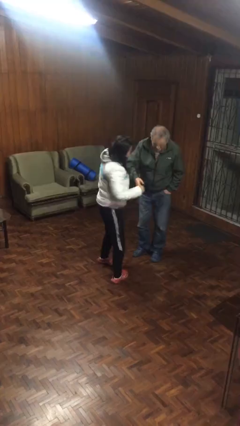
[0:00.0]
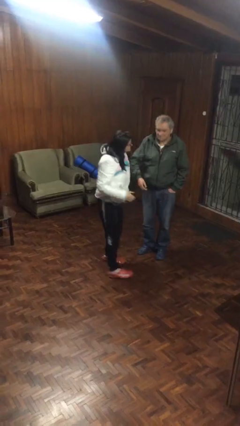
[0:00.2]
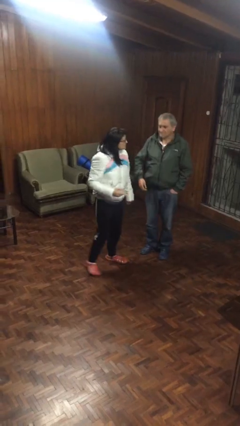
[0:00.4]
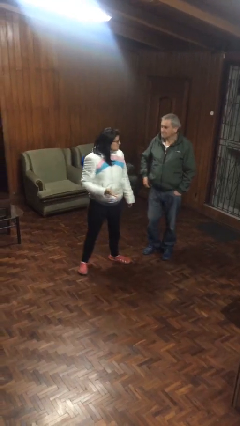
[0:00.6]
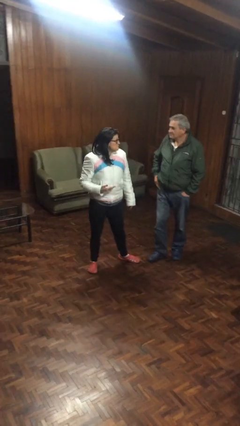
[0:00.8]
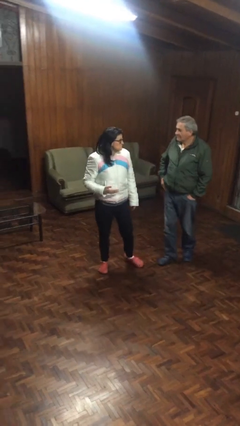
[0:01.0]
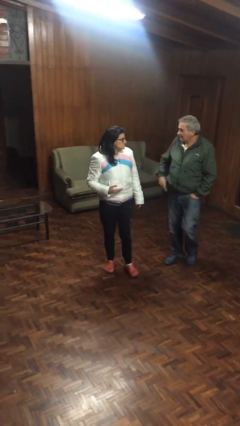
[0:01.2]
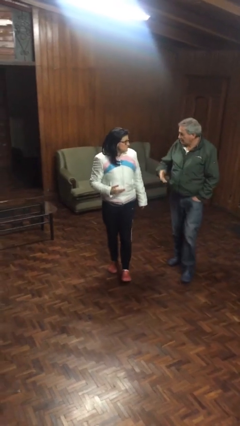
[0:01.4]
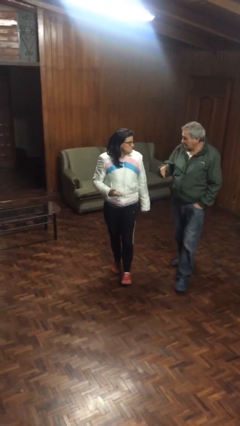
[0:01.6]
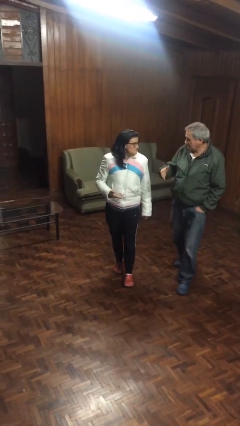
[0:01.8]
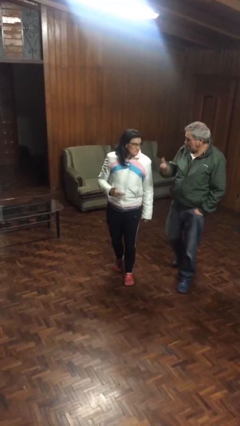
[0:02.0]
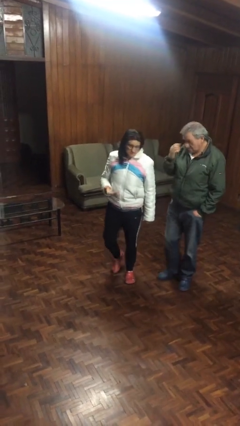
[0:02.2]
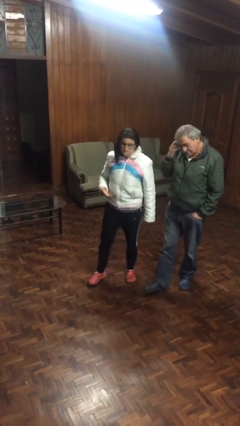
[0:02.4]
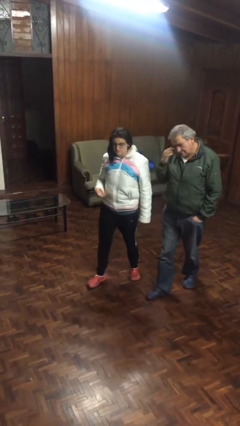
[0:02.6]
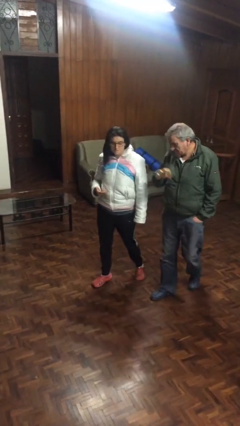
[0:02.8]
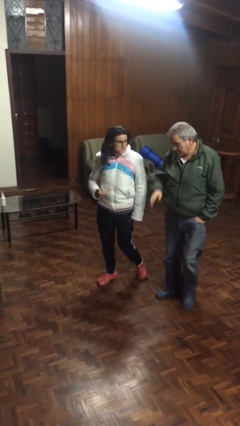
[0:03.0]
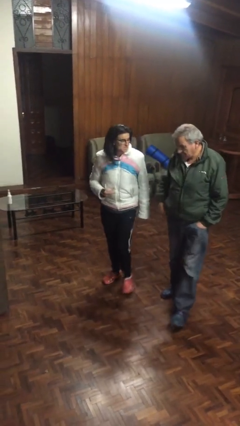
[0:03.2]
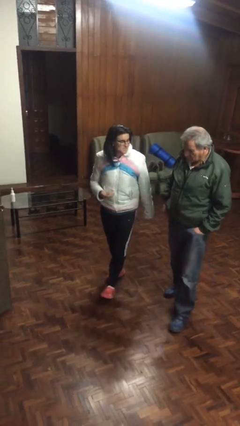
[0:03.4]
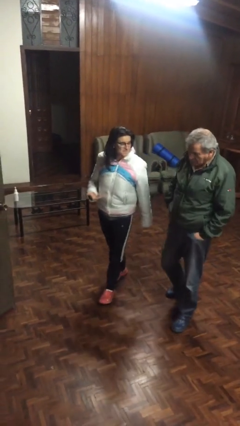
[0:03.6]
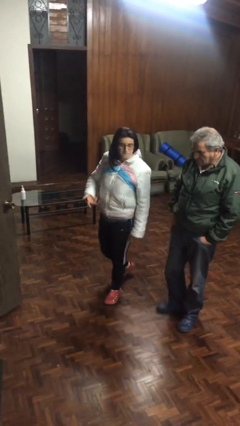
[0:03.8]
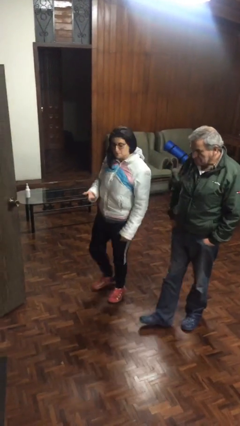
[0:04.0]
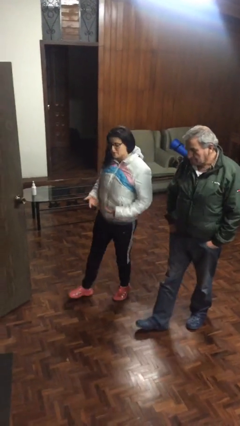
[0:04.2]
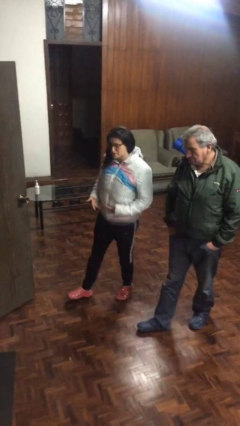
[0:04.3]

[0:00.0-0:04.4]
person talks to person

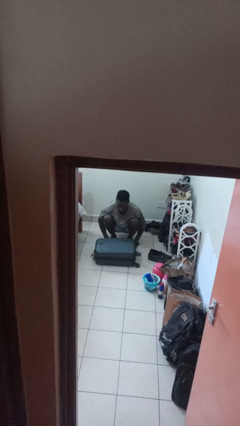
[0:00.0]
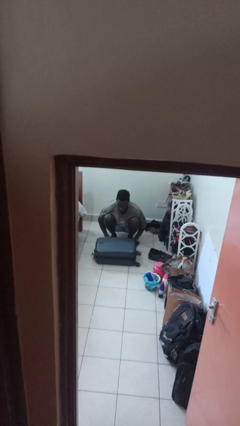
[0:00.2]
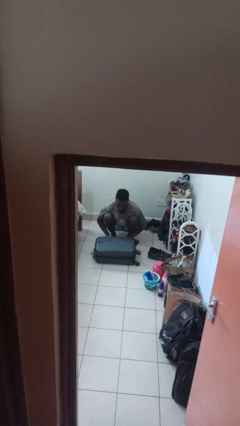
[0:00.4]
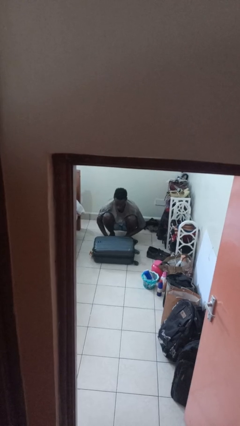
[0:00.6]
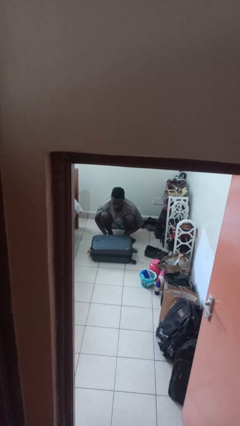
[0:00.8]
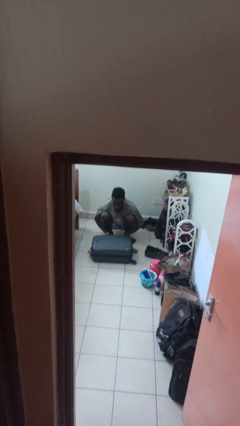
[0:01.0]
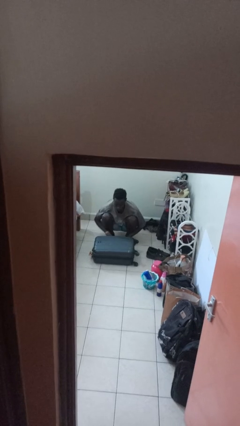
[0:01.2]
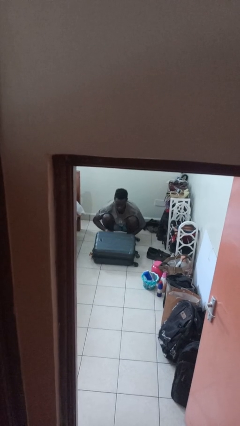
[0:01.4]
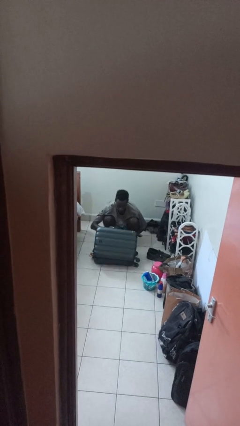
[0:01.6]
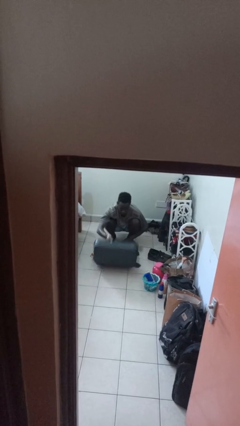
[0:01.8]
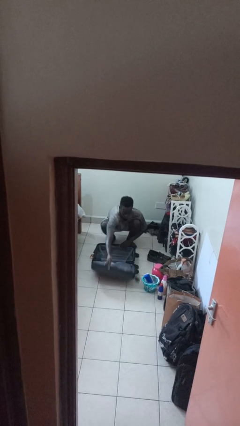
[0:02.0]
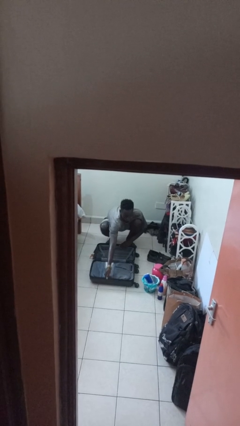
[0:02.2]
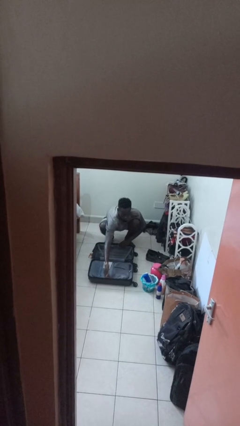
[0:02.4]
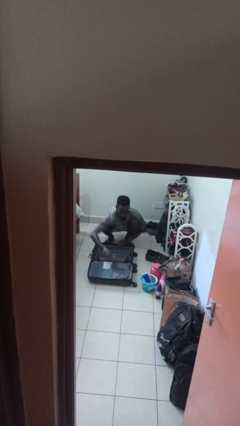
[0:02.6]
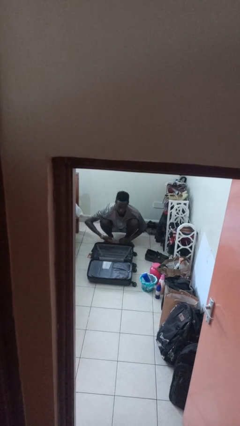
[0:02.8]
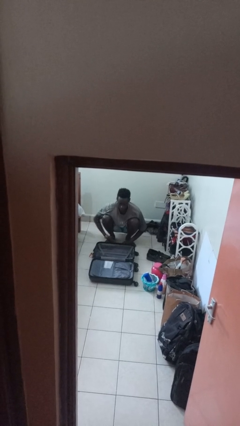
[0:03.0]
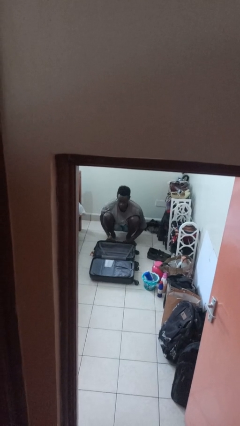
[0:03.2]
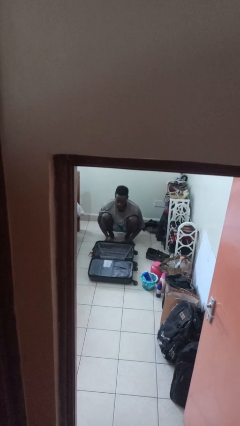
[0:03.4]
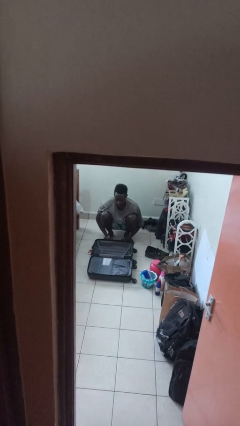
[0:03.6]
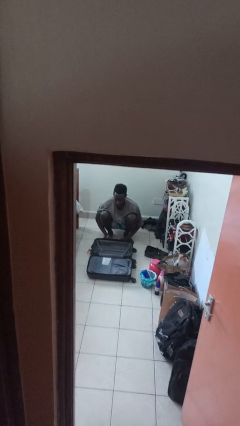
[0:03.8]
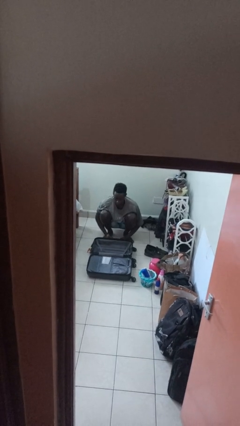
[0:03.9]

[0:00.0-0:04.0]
person opens suitcase

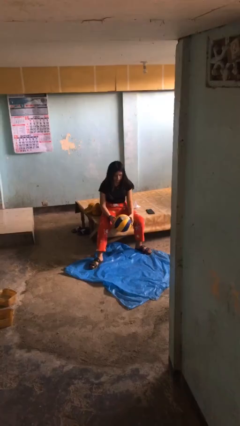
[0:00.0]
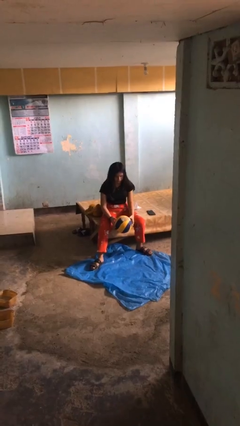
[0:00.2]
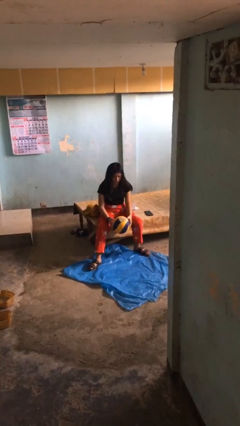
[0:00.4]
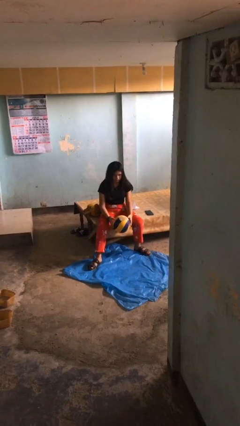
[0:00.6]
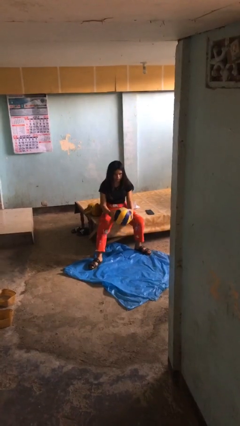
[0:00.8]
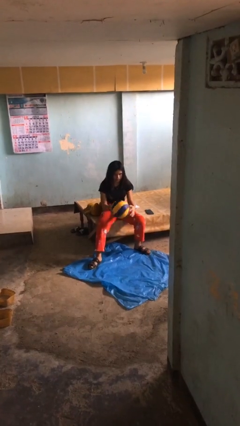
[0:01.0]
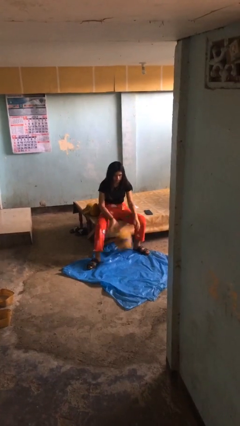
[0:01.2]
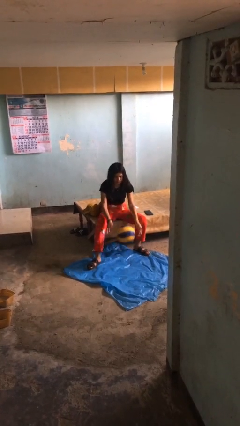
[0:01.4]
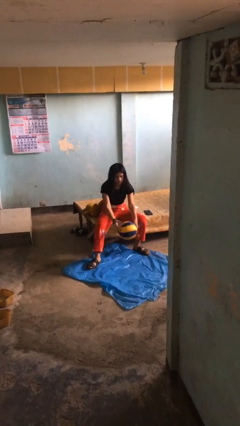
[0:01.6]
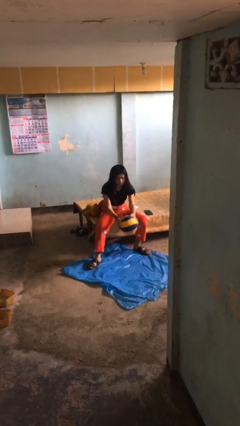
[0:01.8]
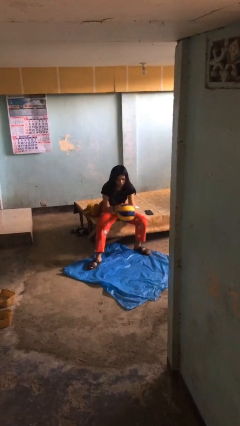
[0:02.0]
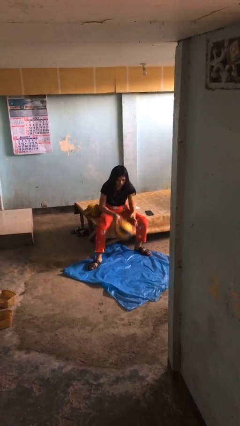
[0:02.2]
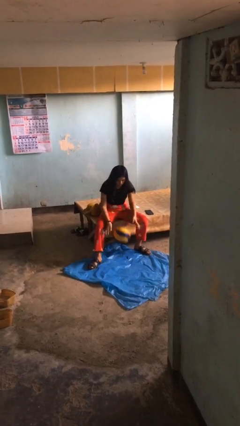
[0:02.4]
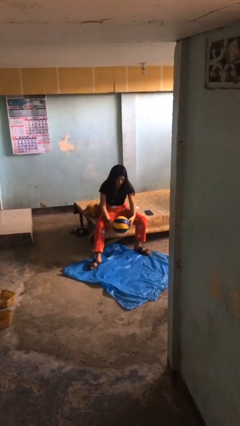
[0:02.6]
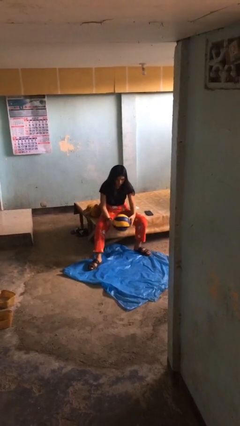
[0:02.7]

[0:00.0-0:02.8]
person bounces ball on floor

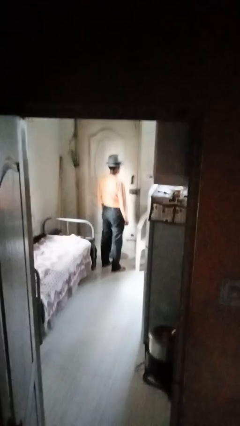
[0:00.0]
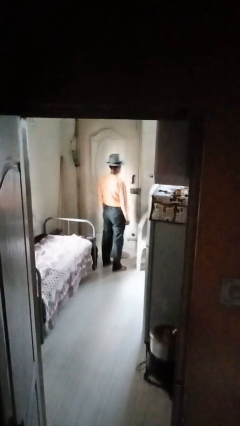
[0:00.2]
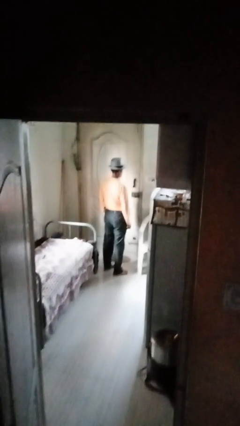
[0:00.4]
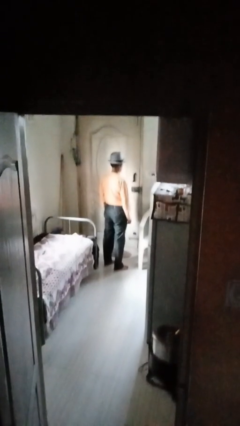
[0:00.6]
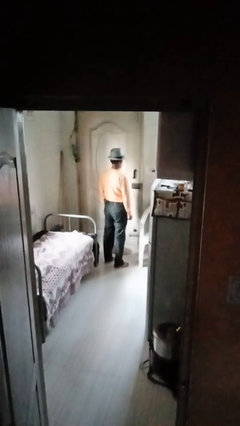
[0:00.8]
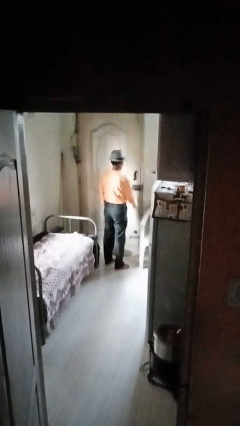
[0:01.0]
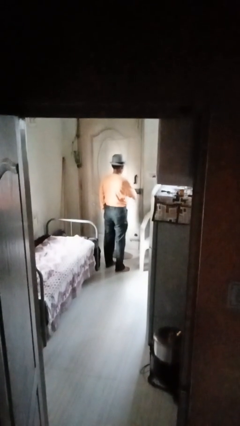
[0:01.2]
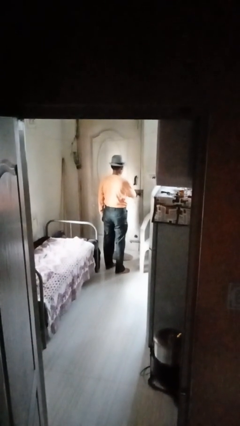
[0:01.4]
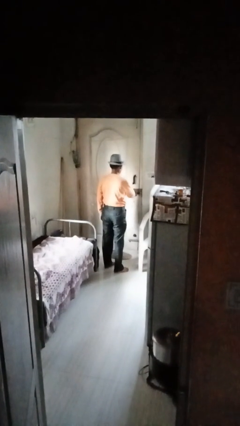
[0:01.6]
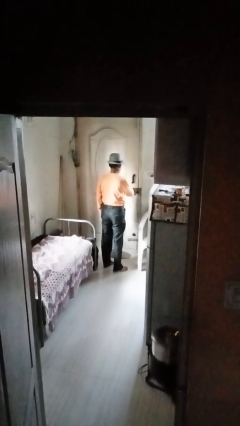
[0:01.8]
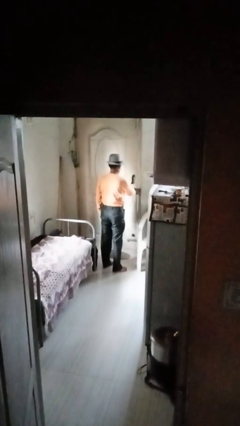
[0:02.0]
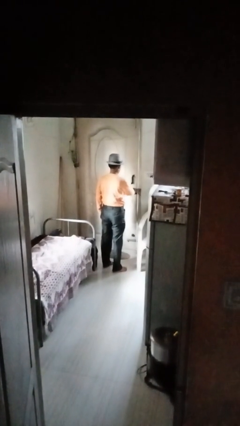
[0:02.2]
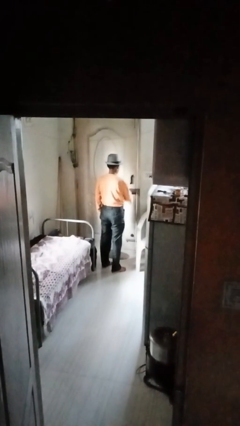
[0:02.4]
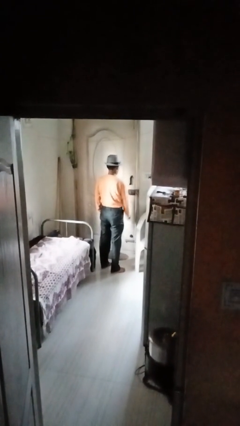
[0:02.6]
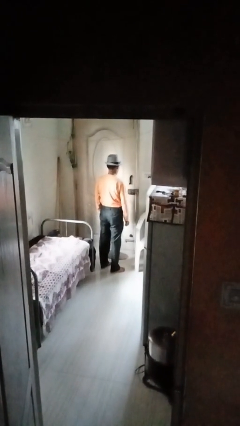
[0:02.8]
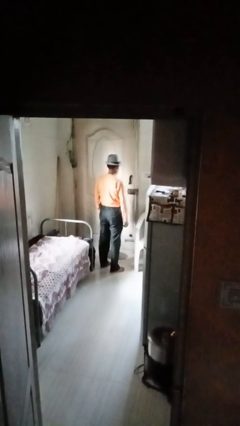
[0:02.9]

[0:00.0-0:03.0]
person unlocks door with keys

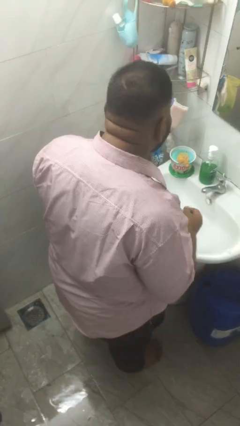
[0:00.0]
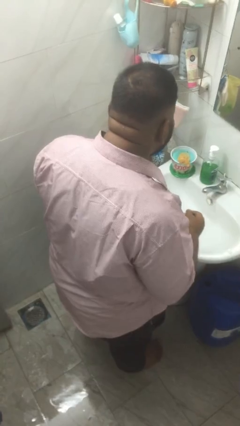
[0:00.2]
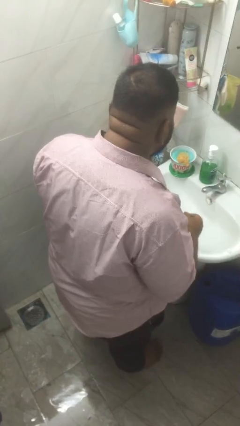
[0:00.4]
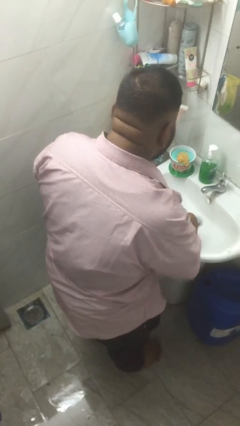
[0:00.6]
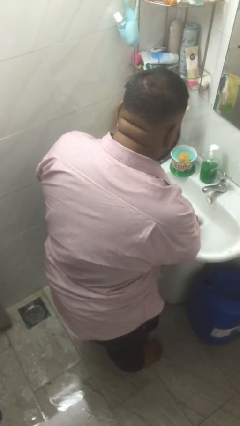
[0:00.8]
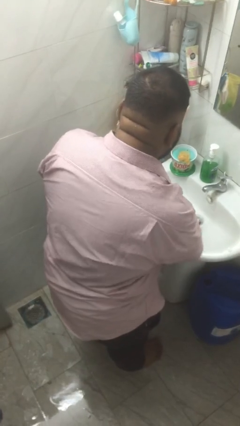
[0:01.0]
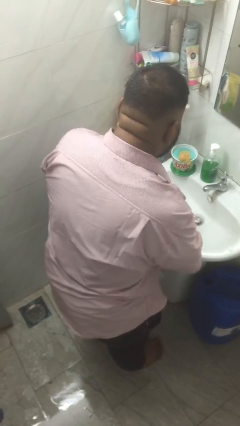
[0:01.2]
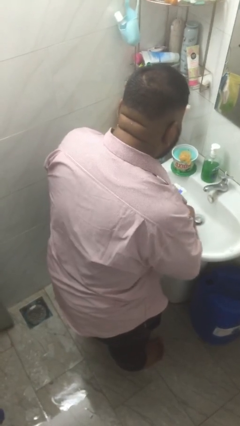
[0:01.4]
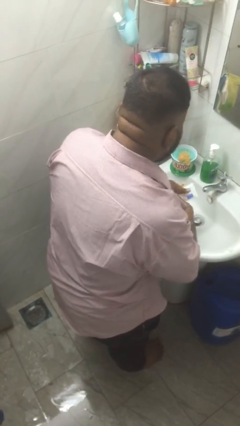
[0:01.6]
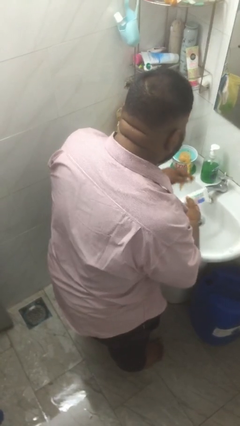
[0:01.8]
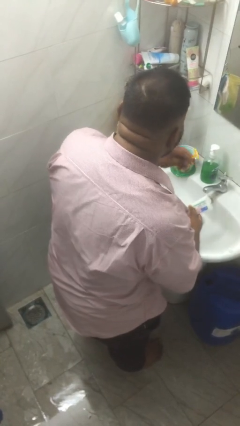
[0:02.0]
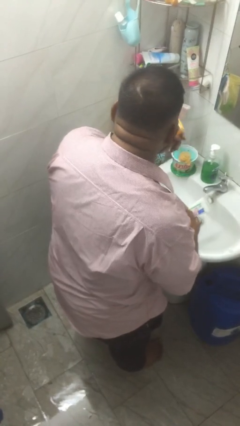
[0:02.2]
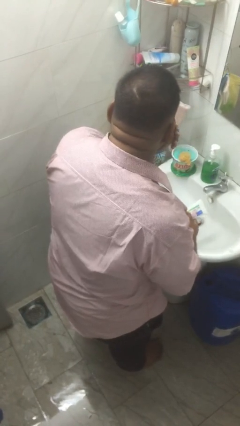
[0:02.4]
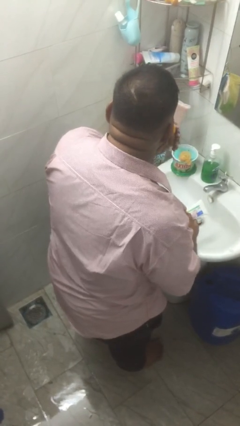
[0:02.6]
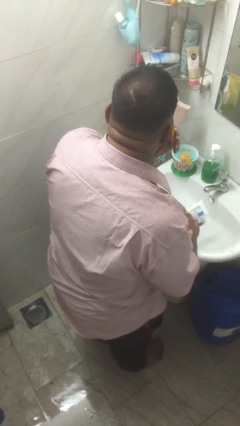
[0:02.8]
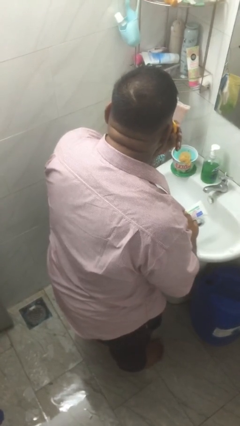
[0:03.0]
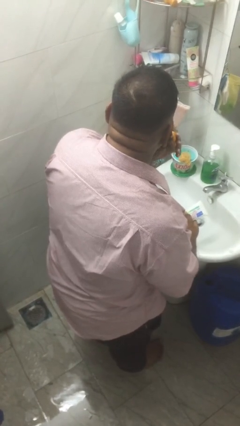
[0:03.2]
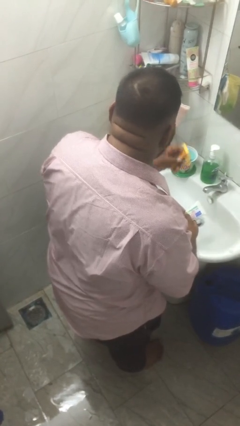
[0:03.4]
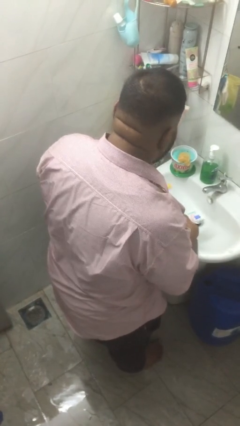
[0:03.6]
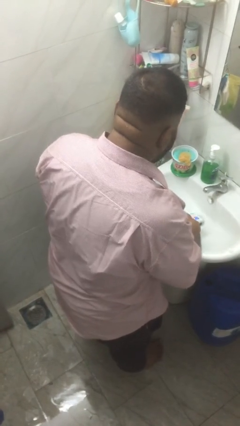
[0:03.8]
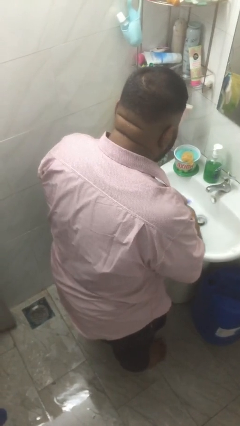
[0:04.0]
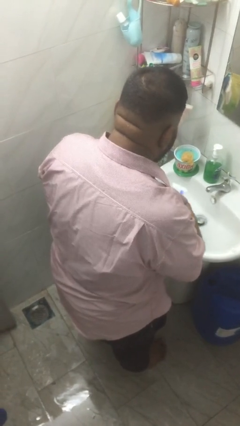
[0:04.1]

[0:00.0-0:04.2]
person shaves face
